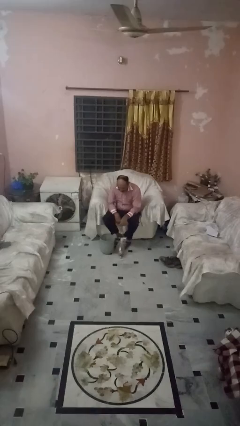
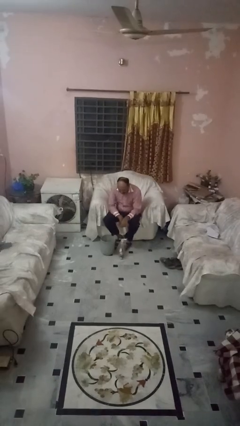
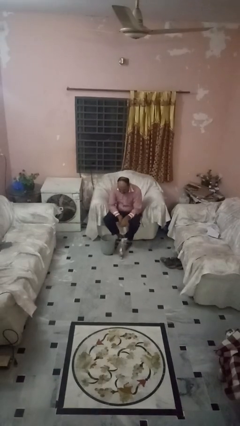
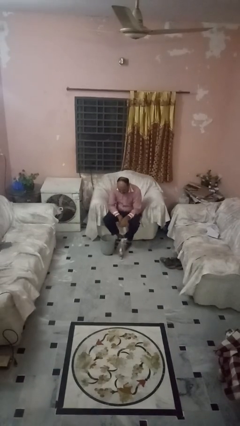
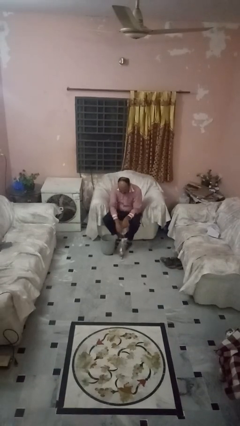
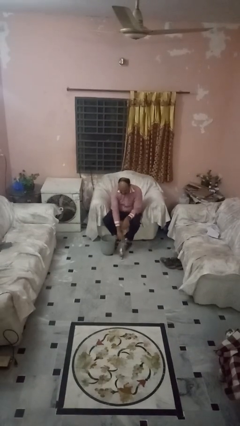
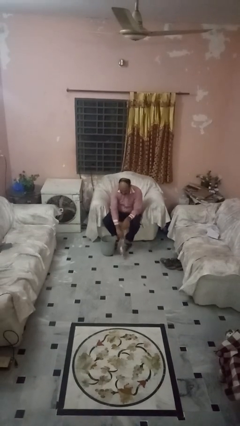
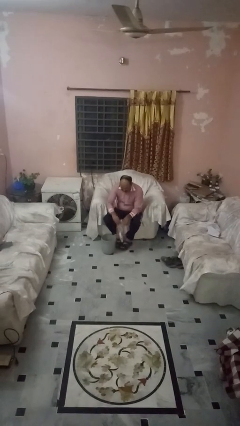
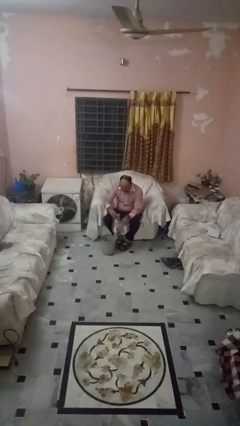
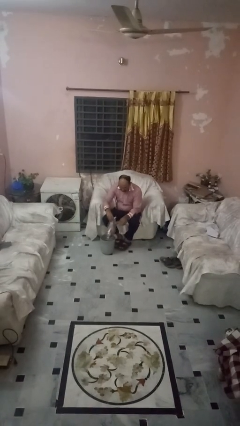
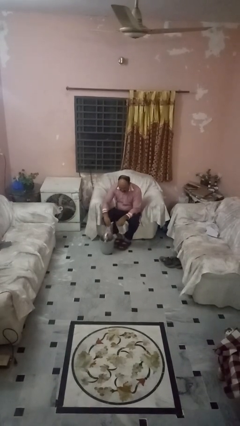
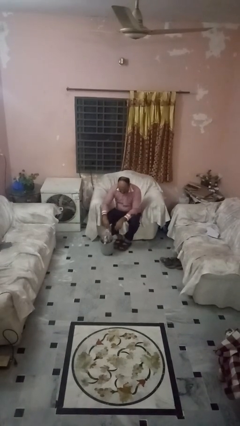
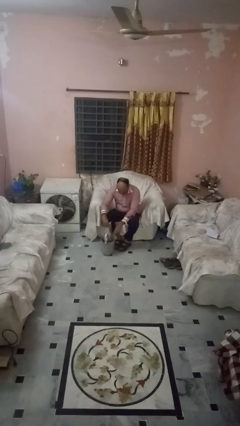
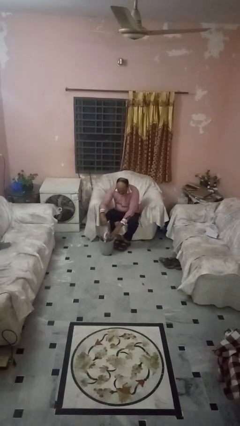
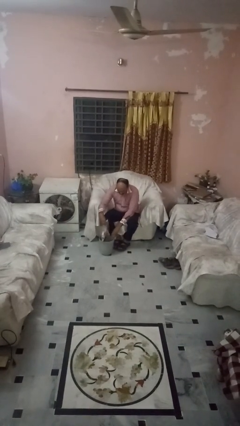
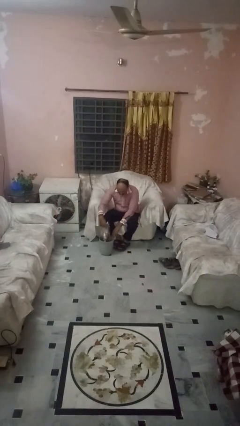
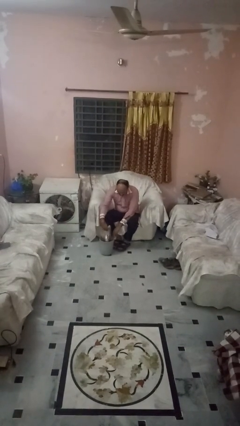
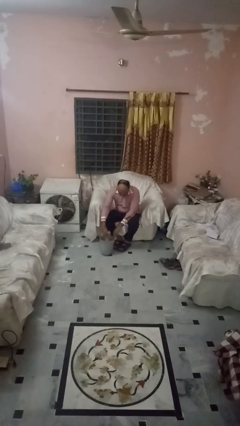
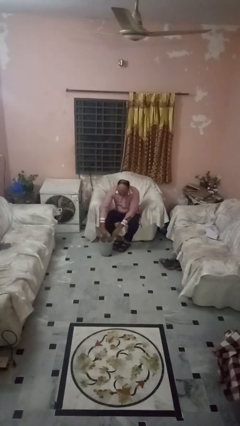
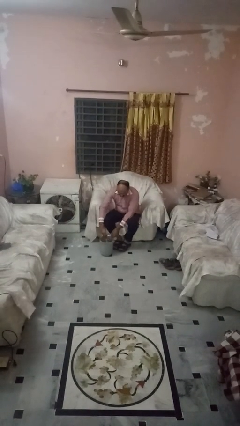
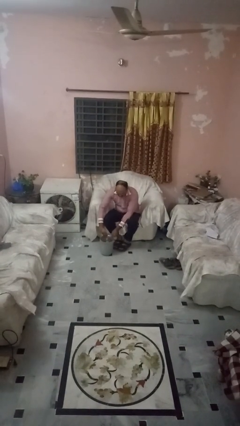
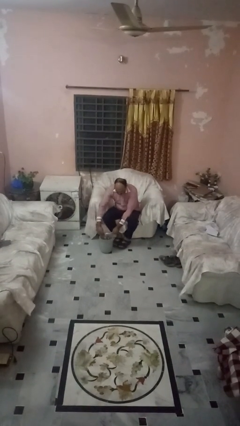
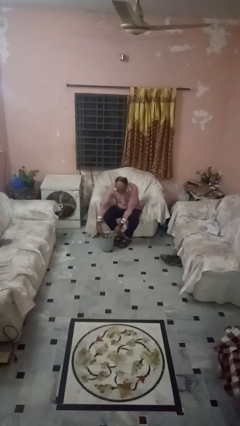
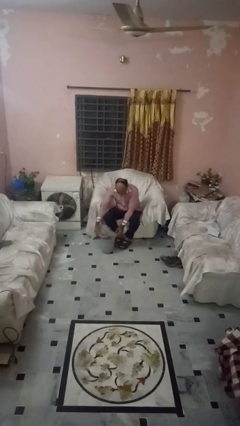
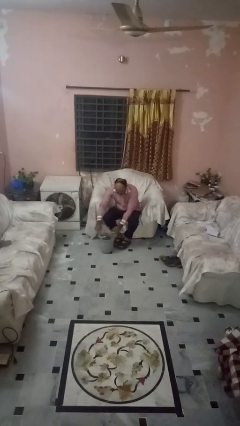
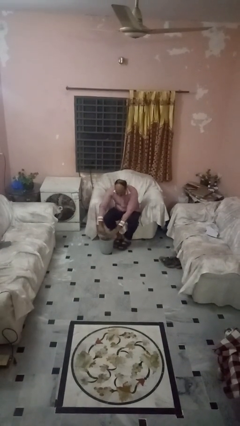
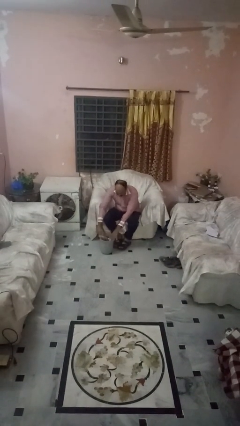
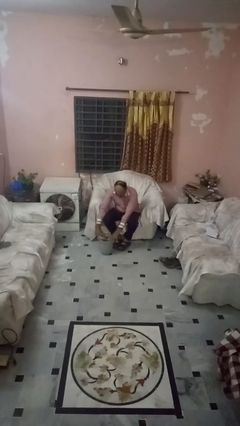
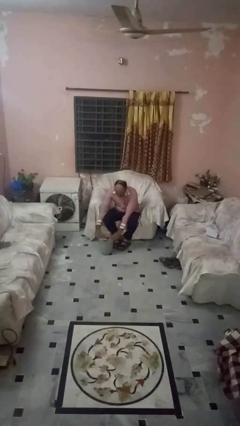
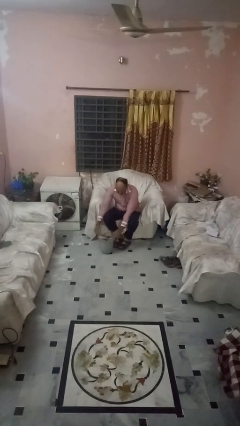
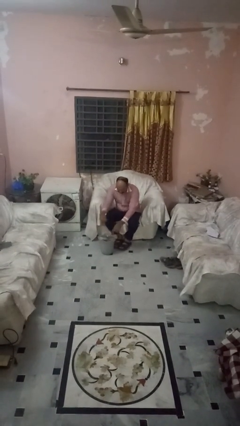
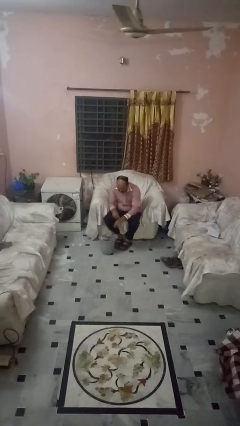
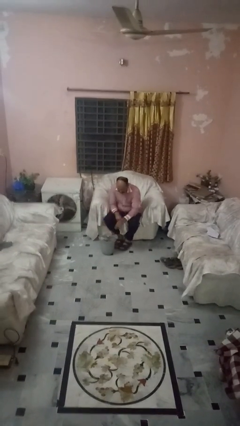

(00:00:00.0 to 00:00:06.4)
person inserts trashbag into trashcan

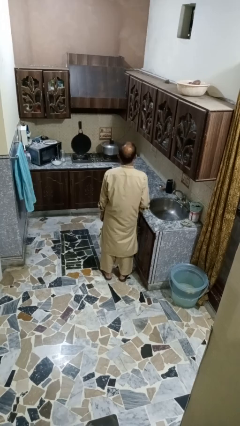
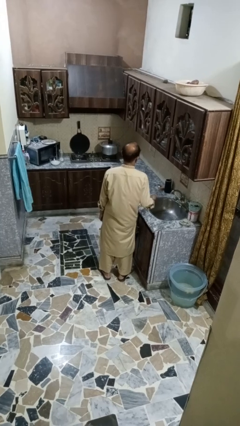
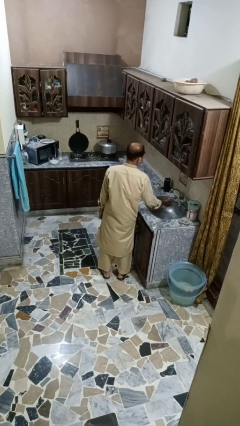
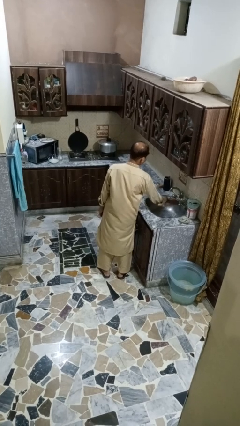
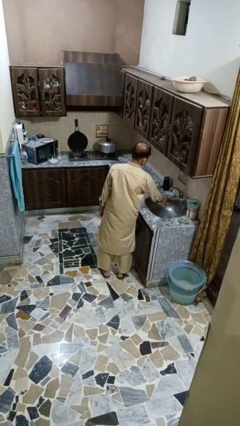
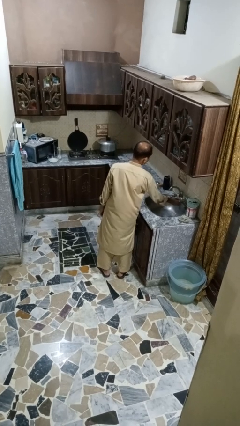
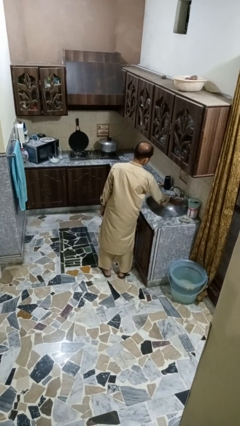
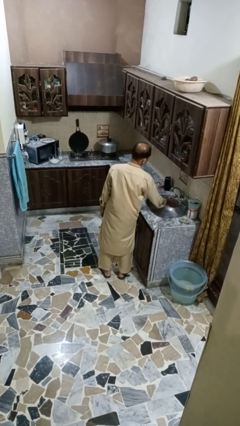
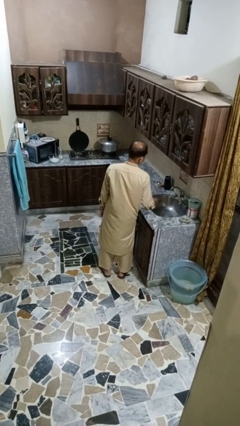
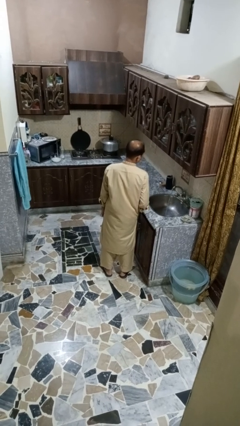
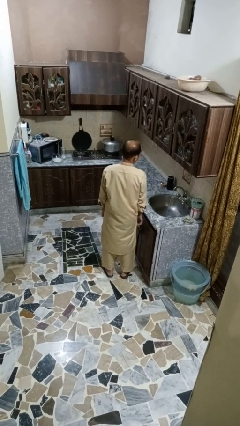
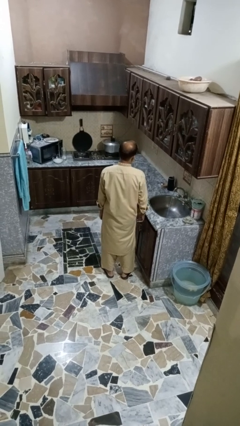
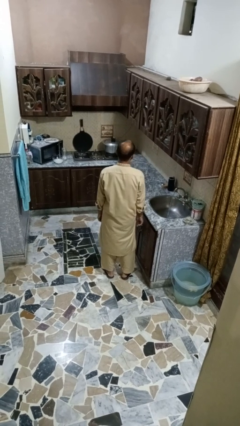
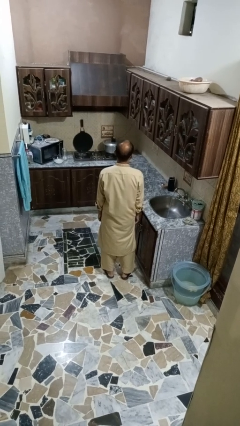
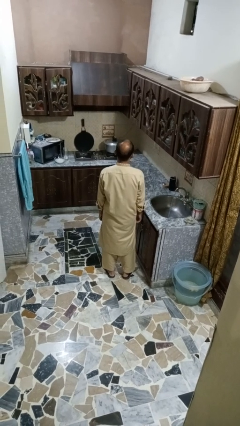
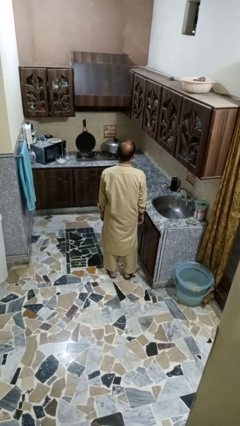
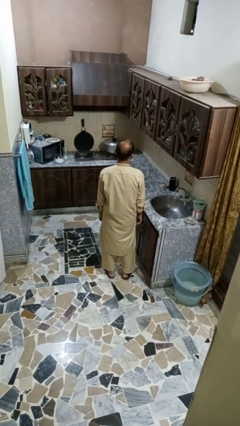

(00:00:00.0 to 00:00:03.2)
person turns on faucet

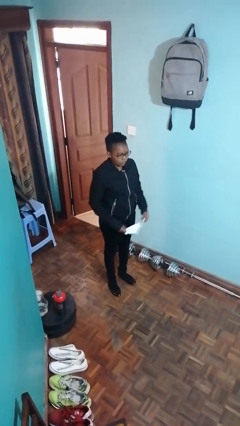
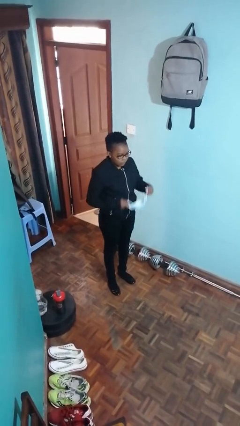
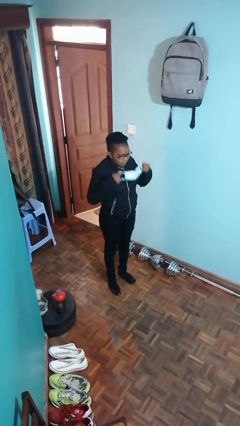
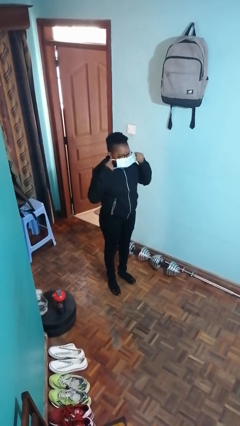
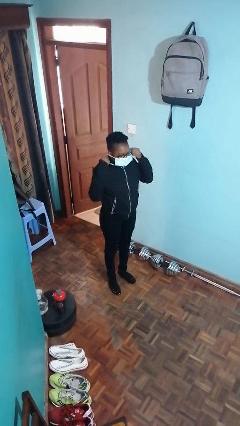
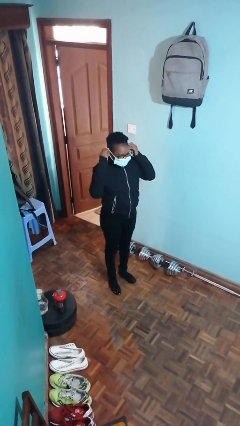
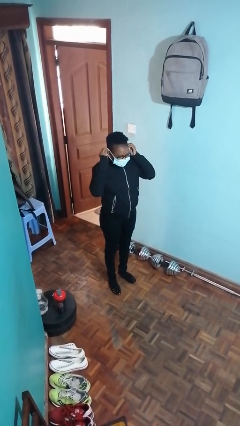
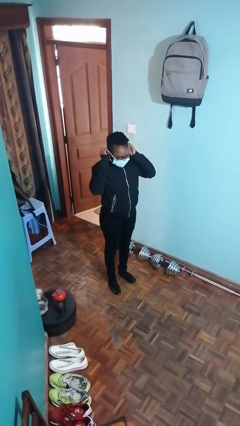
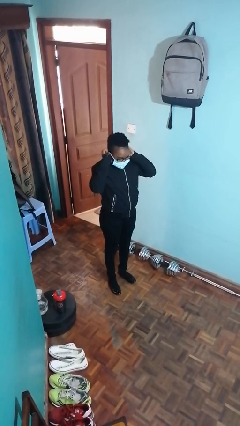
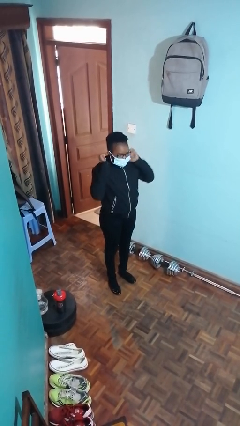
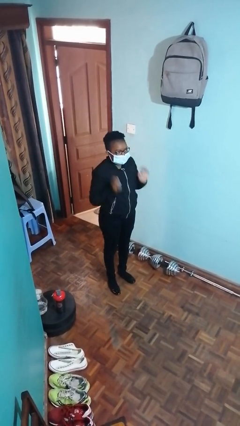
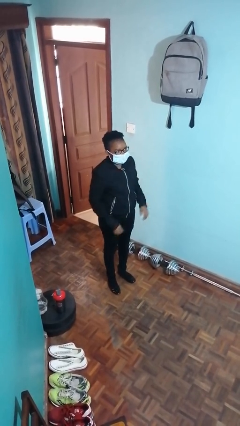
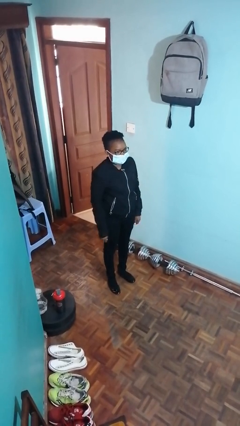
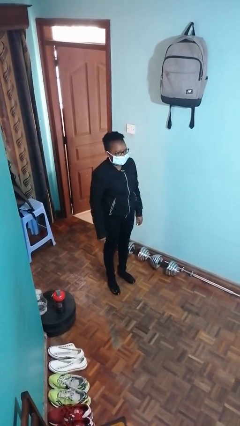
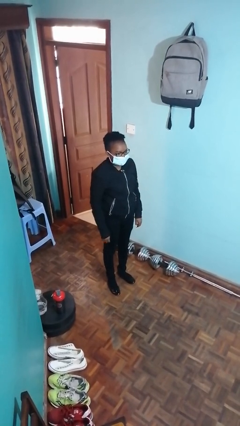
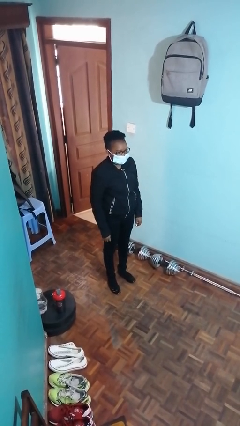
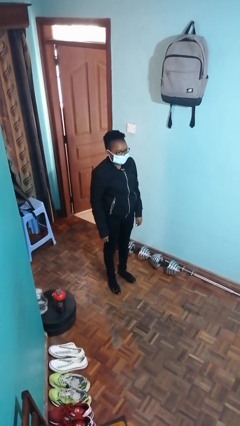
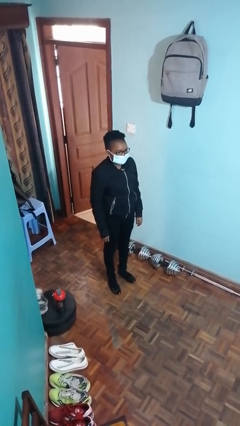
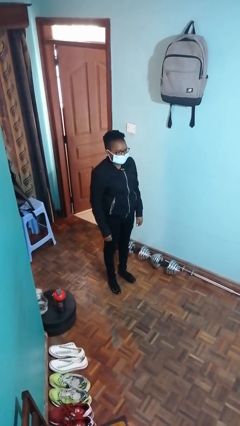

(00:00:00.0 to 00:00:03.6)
person puts on facemask

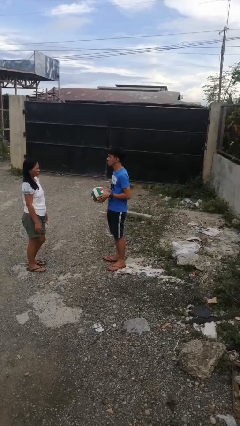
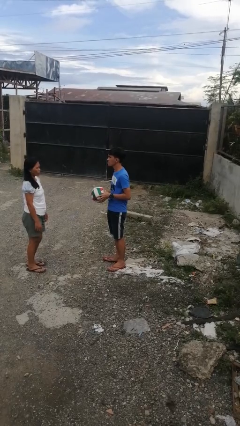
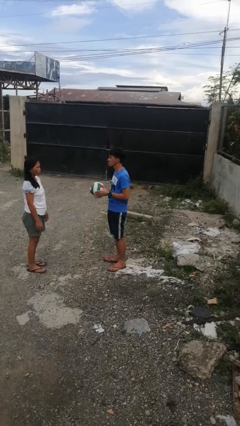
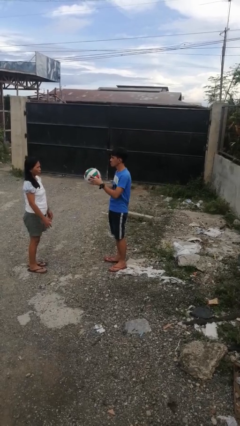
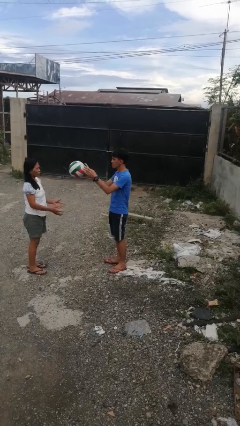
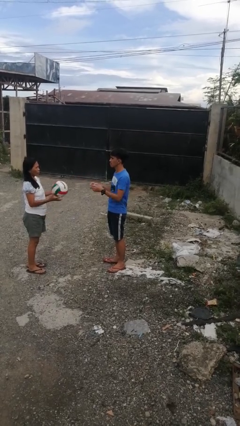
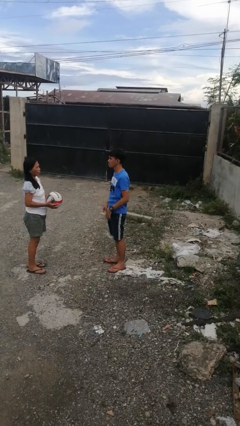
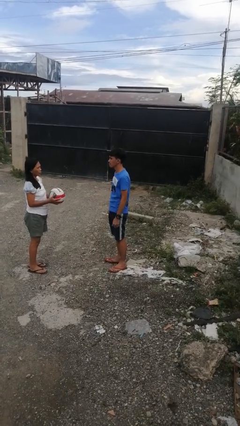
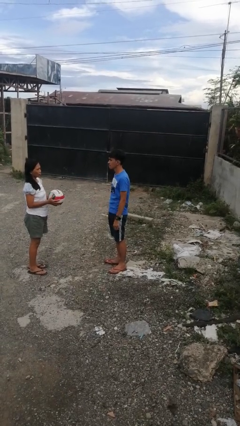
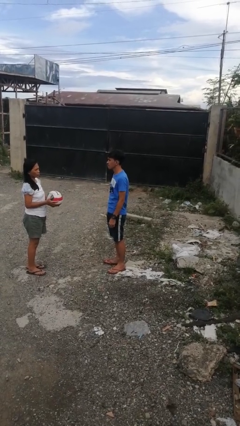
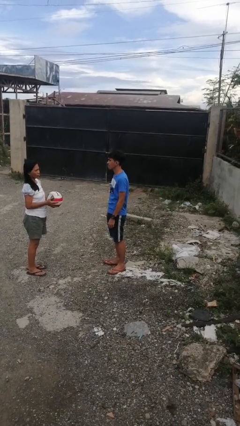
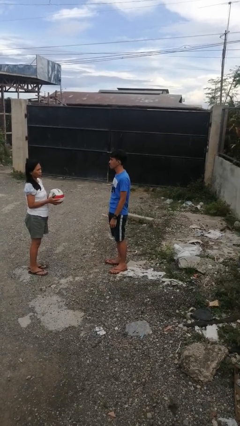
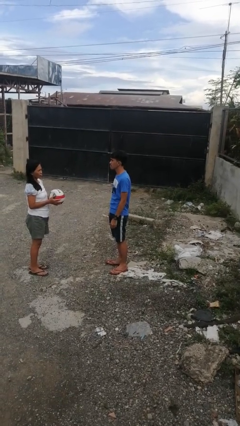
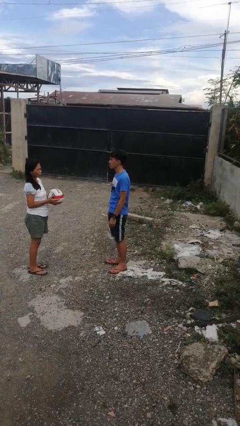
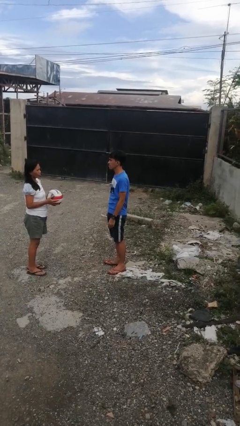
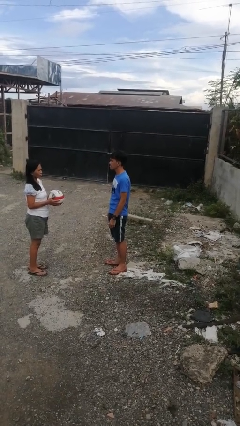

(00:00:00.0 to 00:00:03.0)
person throws object to person

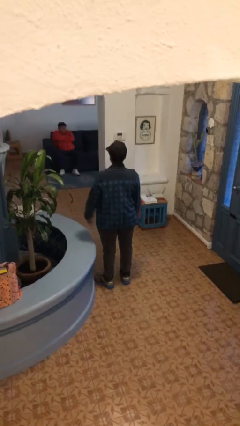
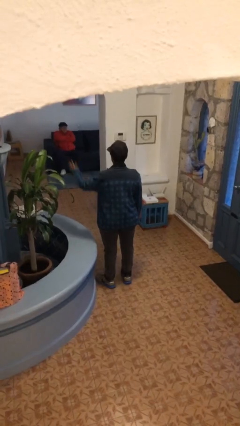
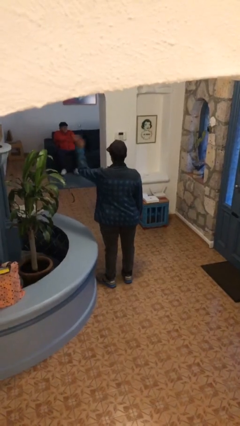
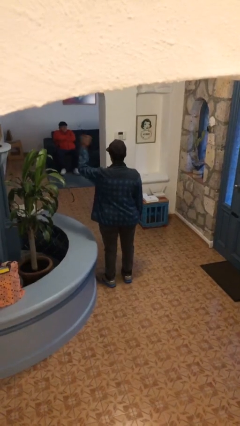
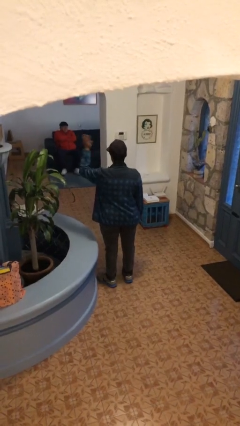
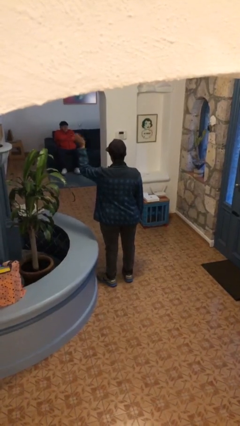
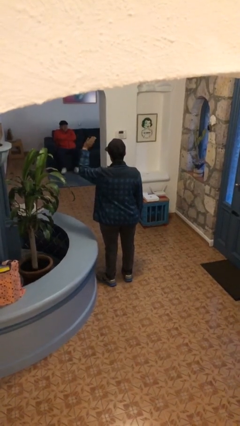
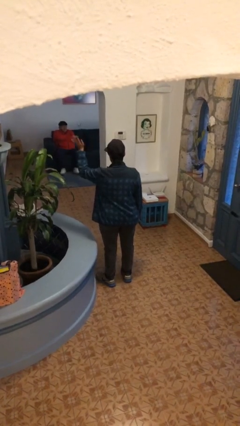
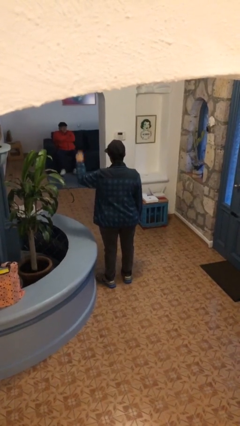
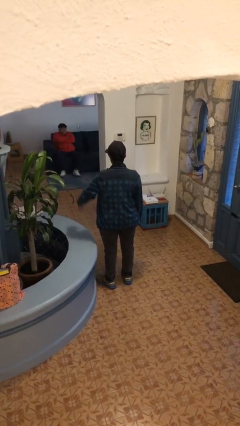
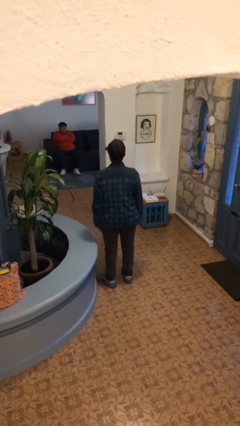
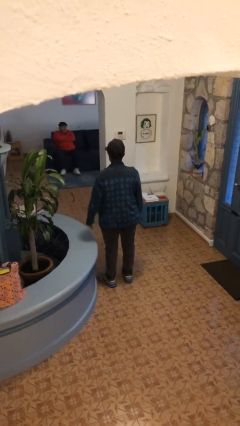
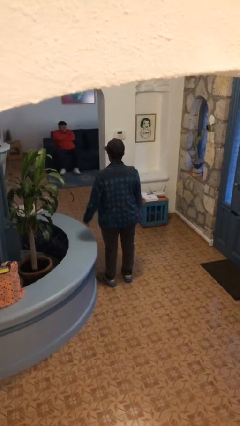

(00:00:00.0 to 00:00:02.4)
person waves at person
